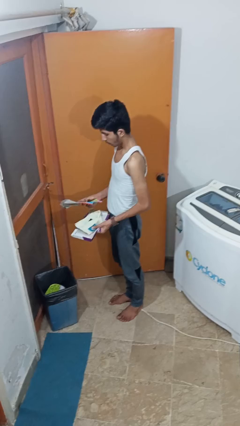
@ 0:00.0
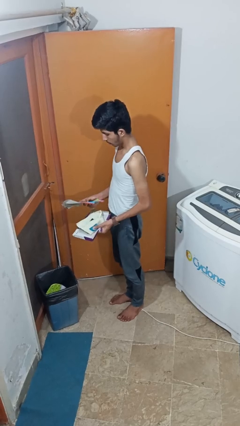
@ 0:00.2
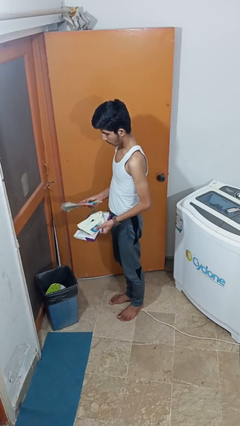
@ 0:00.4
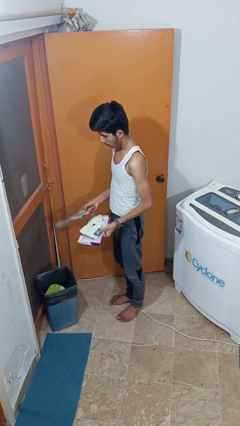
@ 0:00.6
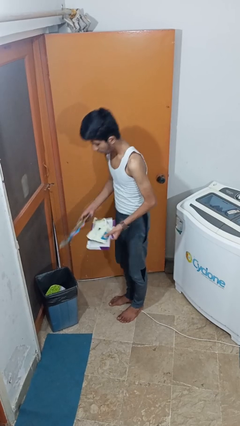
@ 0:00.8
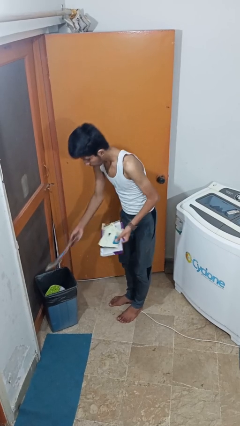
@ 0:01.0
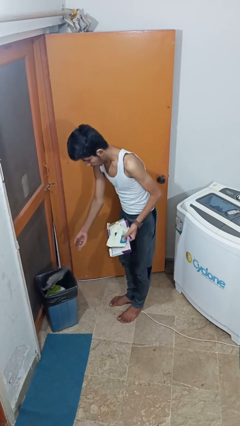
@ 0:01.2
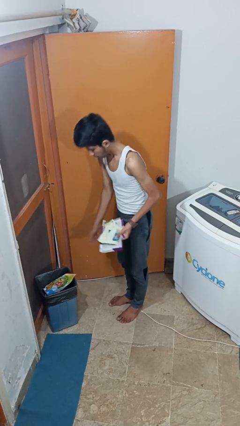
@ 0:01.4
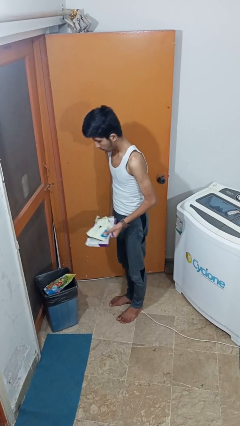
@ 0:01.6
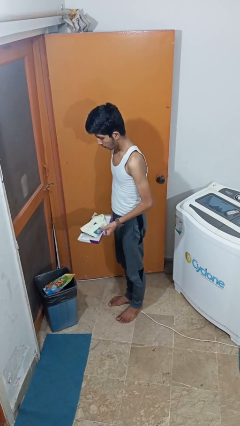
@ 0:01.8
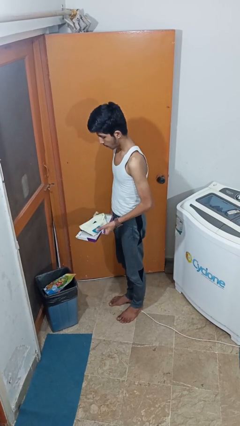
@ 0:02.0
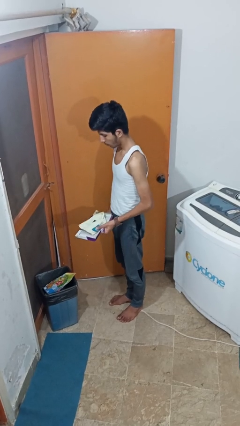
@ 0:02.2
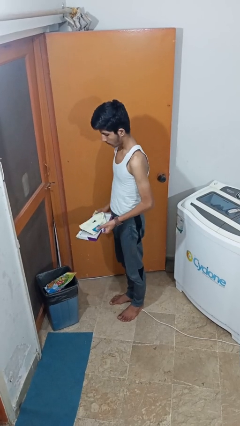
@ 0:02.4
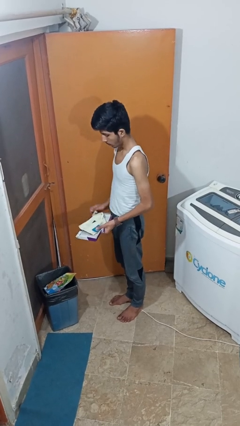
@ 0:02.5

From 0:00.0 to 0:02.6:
person discards trash

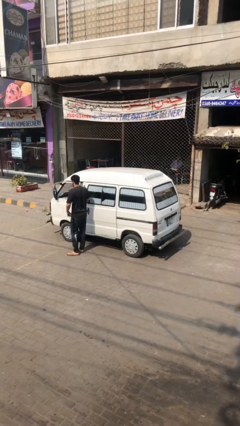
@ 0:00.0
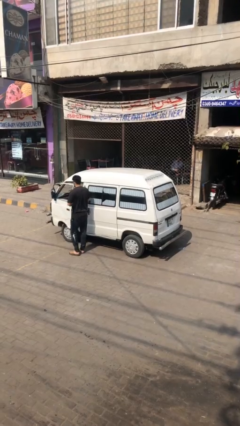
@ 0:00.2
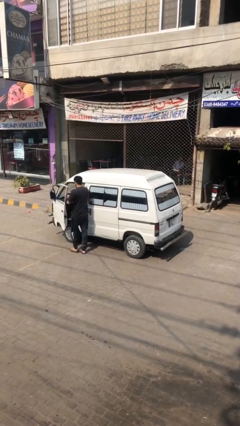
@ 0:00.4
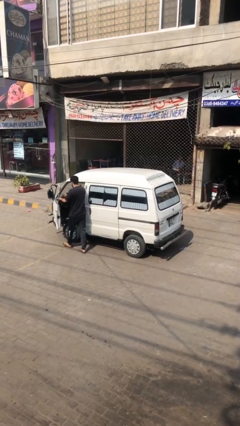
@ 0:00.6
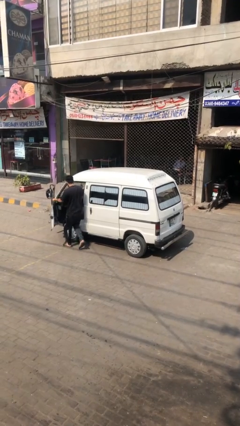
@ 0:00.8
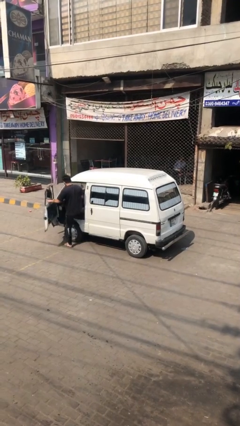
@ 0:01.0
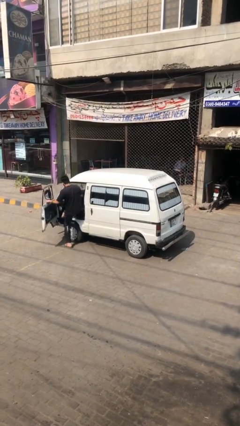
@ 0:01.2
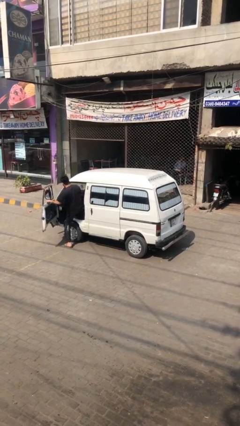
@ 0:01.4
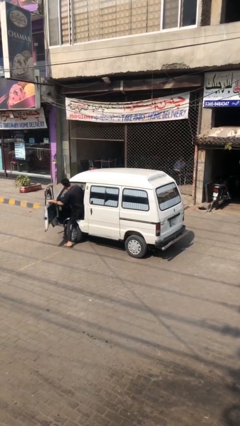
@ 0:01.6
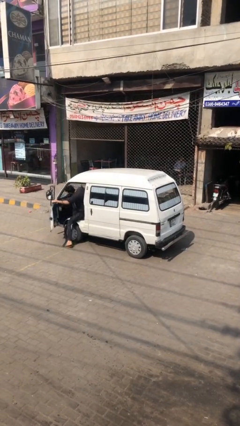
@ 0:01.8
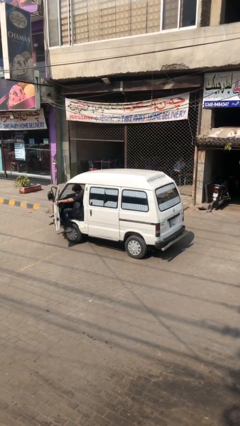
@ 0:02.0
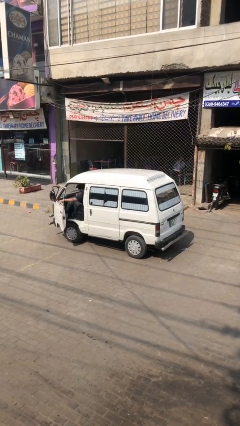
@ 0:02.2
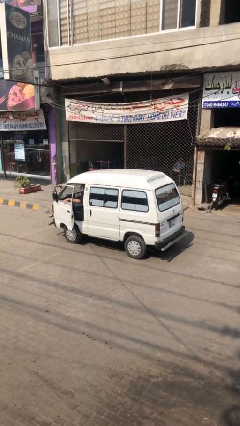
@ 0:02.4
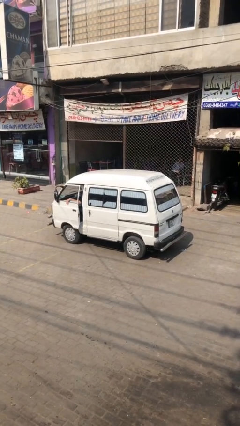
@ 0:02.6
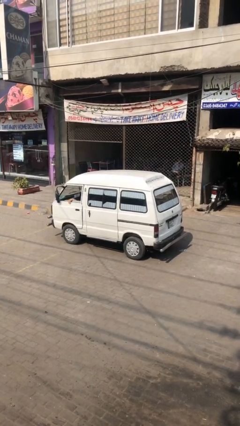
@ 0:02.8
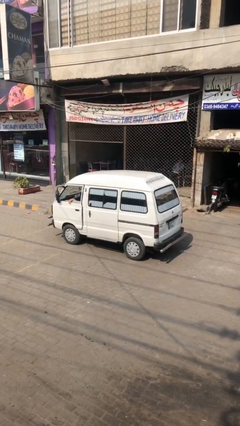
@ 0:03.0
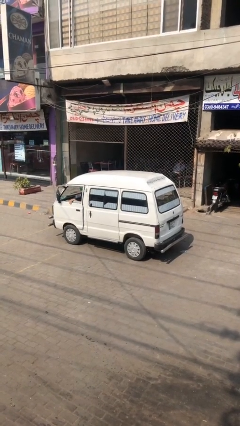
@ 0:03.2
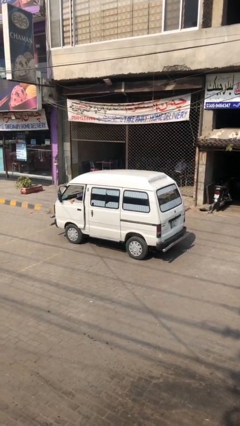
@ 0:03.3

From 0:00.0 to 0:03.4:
car picks up person

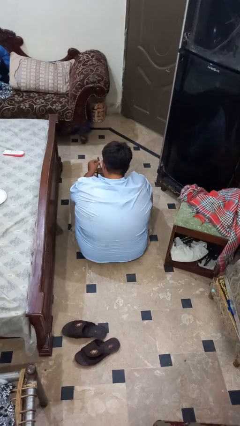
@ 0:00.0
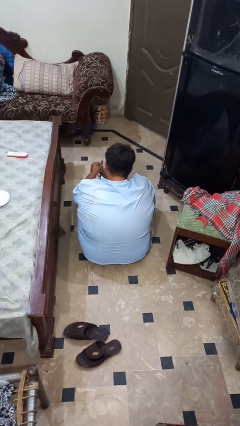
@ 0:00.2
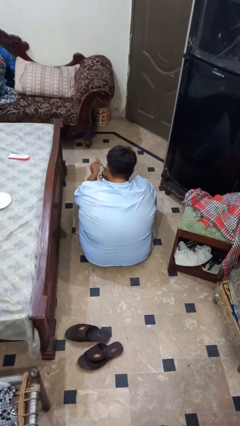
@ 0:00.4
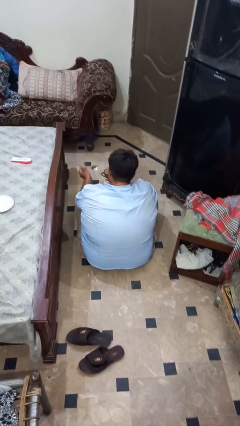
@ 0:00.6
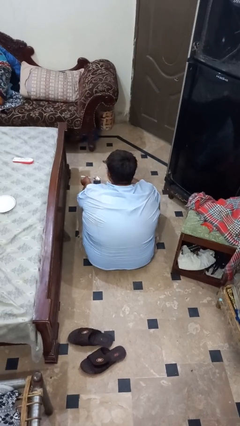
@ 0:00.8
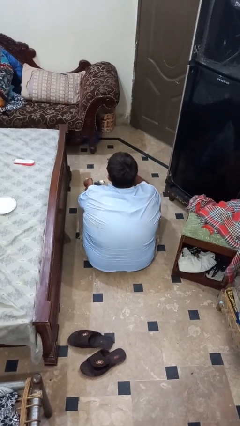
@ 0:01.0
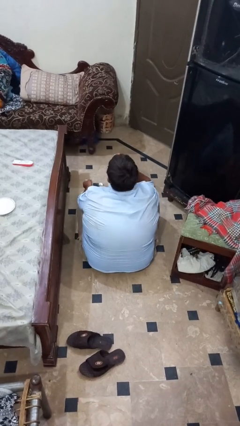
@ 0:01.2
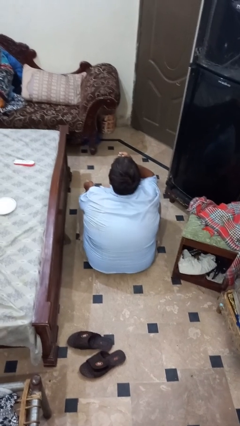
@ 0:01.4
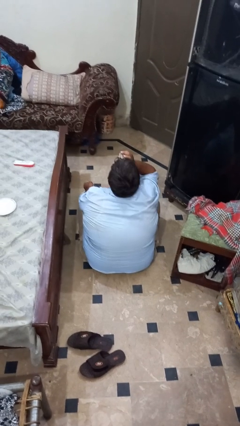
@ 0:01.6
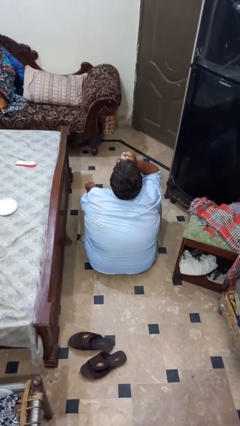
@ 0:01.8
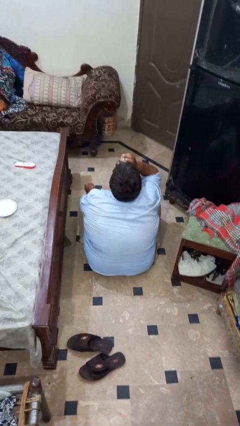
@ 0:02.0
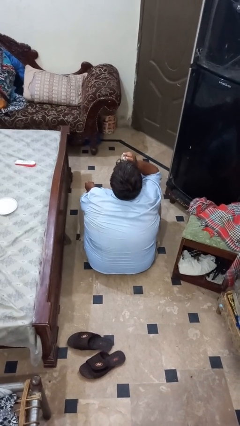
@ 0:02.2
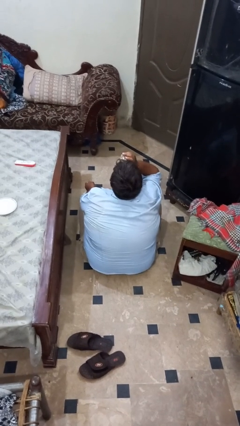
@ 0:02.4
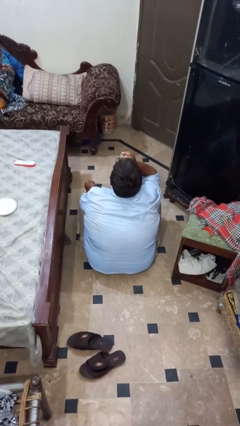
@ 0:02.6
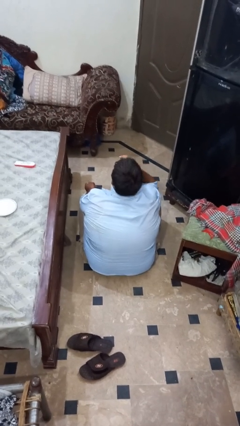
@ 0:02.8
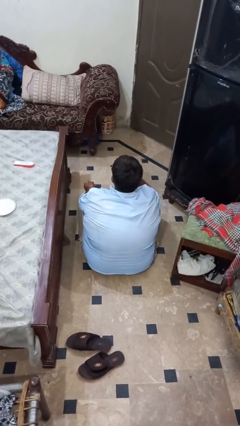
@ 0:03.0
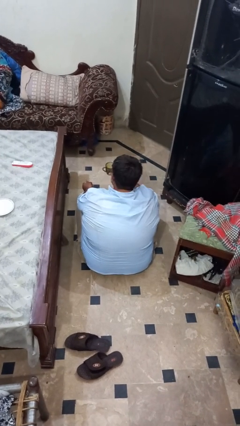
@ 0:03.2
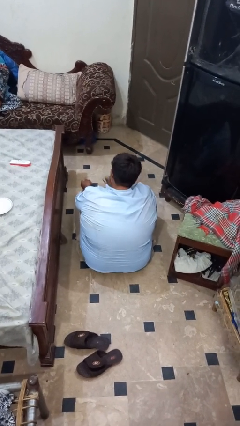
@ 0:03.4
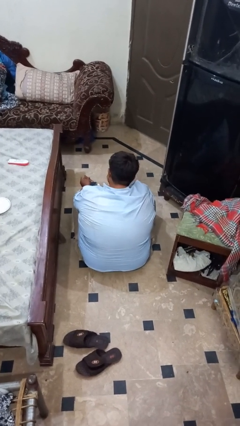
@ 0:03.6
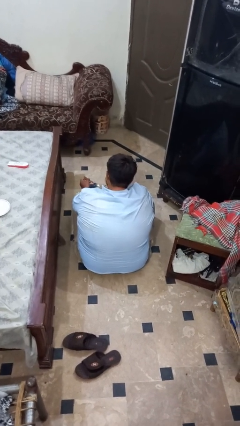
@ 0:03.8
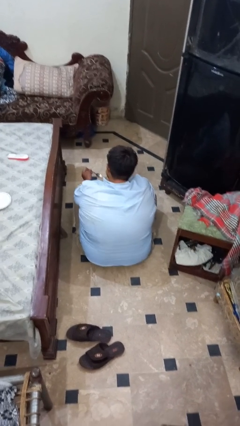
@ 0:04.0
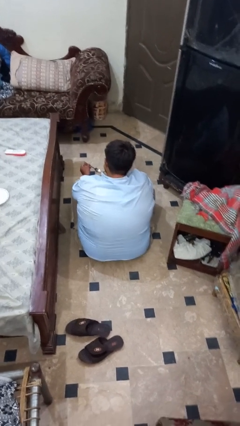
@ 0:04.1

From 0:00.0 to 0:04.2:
person drinks from mug

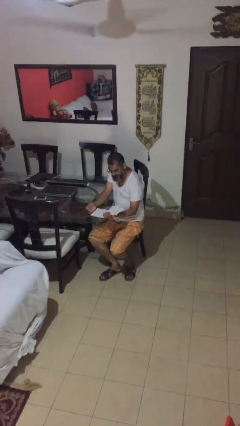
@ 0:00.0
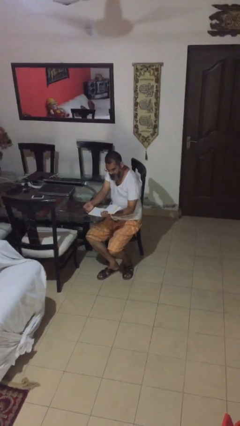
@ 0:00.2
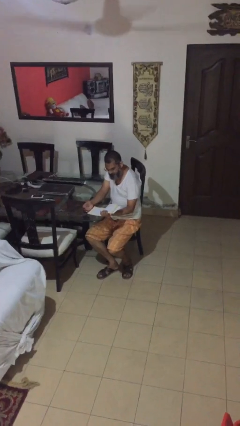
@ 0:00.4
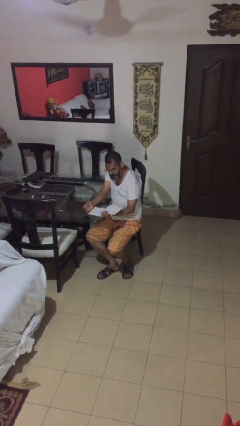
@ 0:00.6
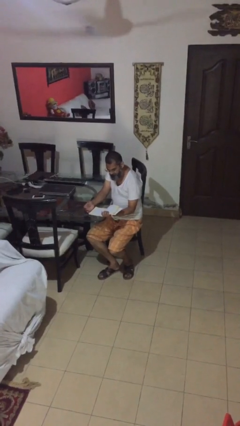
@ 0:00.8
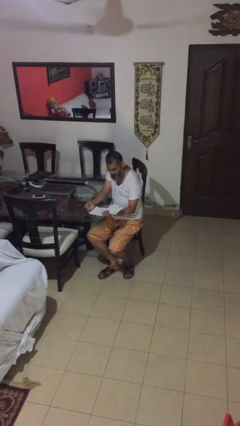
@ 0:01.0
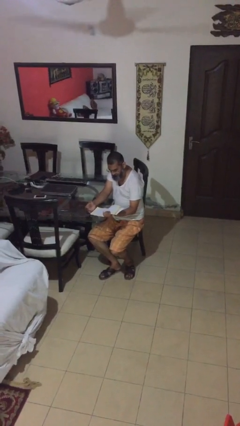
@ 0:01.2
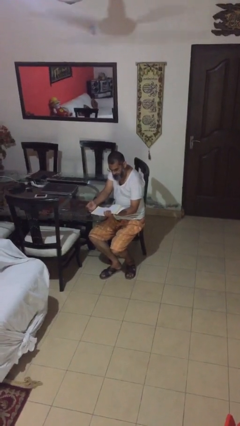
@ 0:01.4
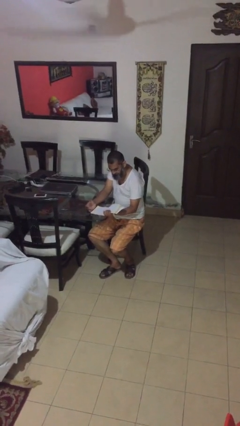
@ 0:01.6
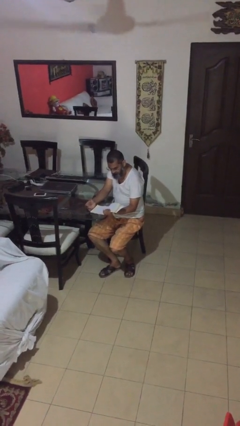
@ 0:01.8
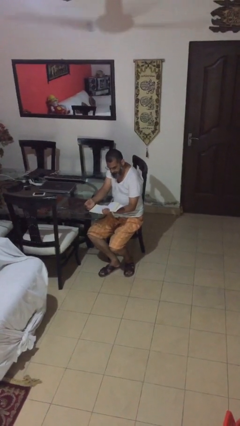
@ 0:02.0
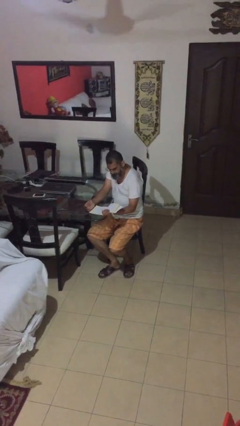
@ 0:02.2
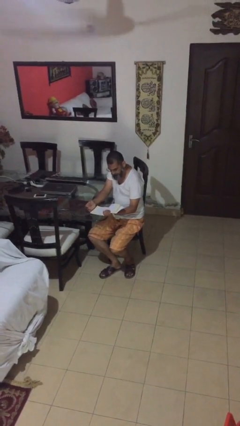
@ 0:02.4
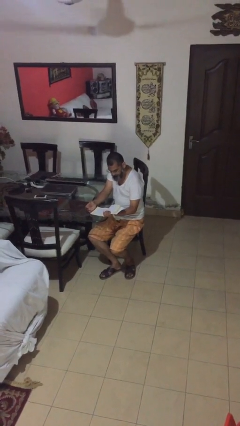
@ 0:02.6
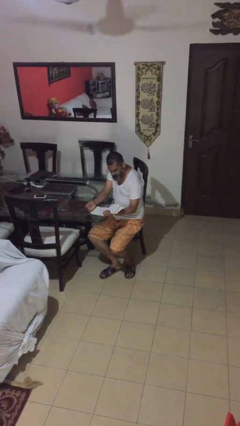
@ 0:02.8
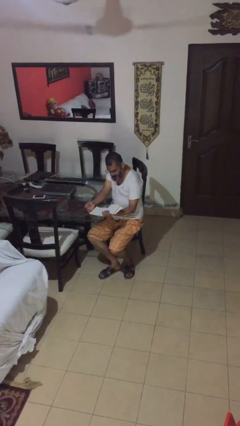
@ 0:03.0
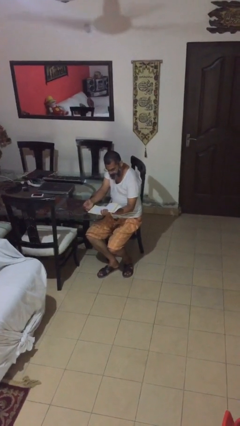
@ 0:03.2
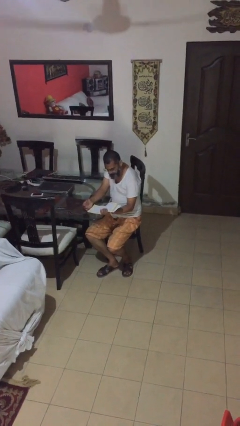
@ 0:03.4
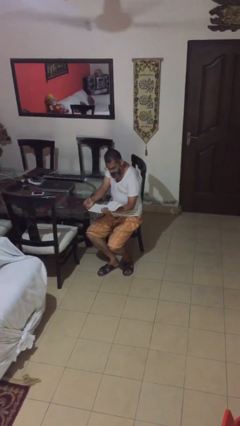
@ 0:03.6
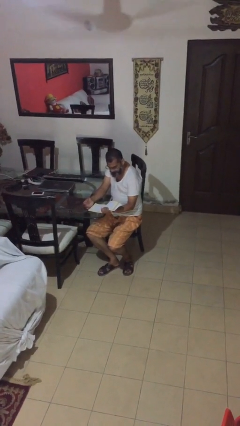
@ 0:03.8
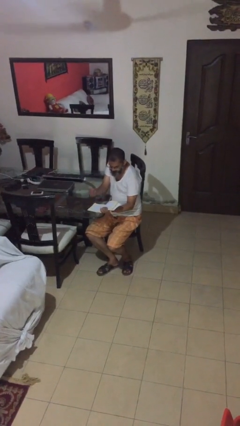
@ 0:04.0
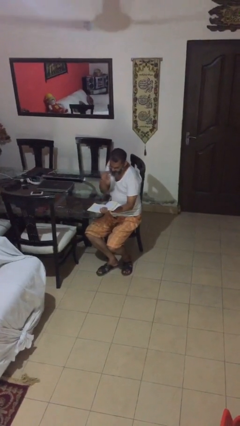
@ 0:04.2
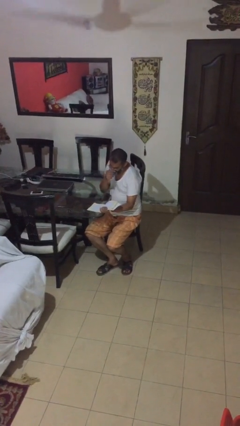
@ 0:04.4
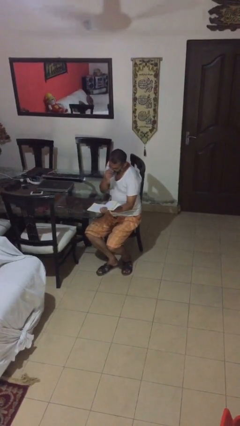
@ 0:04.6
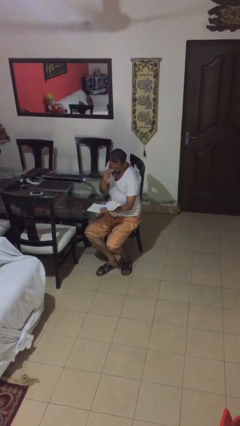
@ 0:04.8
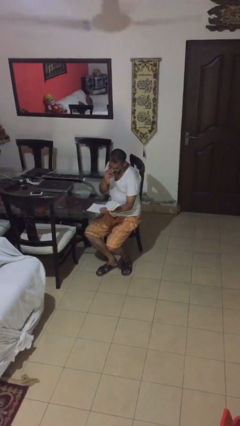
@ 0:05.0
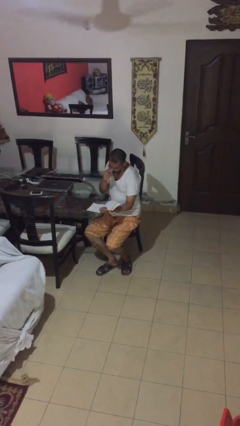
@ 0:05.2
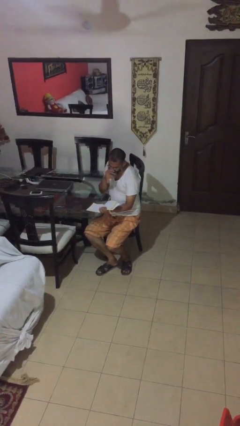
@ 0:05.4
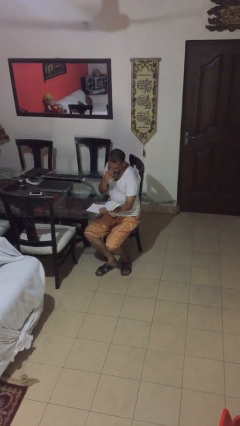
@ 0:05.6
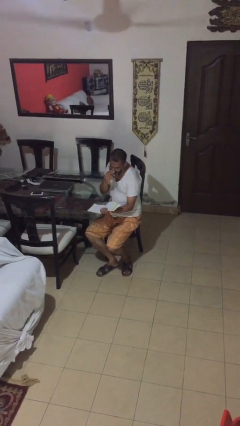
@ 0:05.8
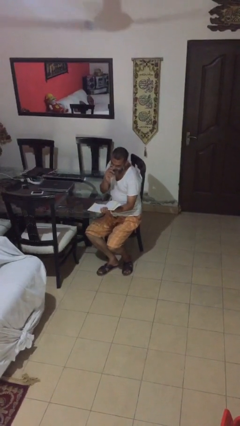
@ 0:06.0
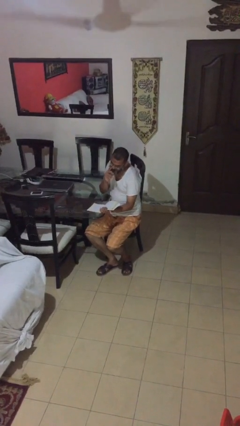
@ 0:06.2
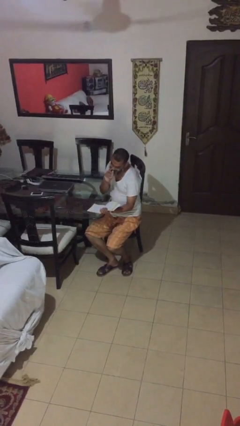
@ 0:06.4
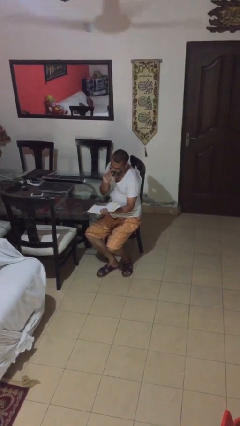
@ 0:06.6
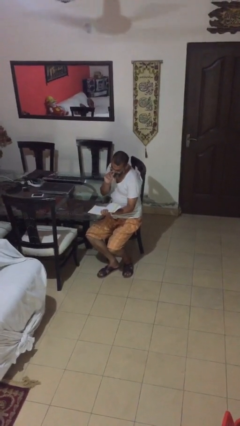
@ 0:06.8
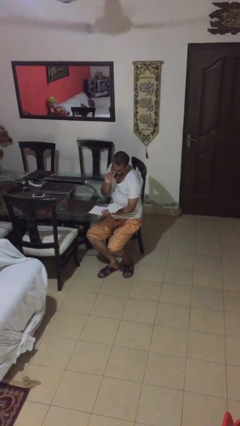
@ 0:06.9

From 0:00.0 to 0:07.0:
person reads document
